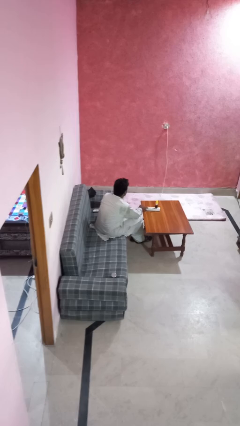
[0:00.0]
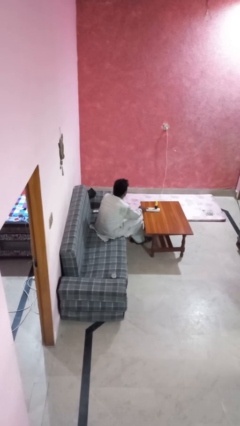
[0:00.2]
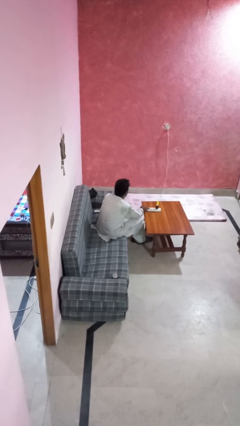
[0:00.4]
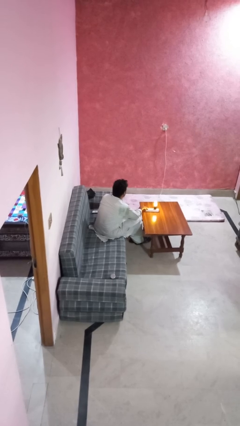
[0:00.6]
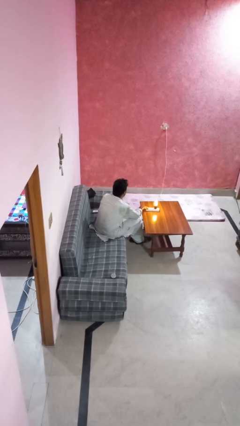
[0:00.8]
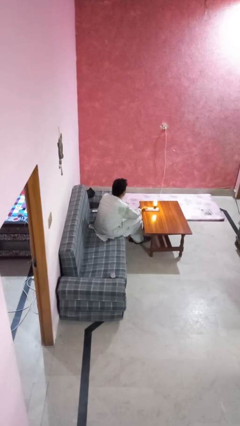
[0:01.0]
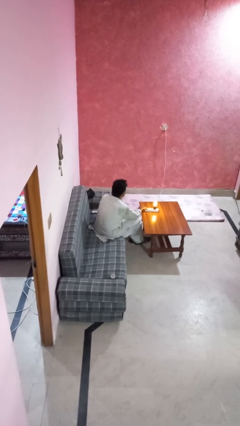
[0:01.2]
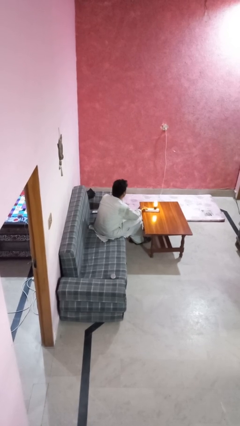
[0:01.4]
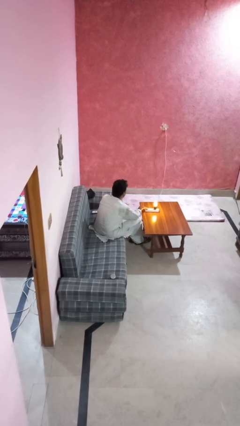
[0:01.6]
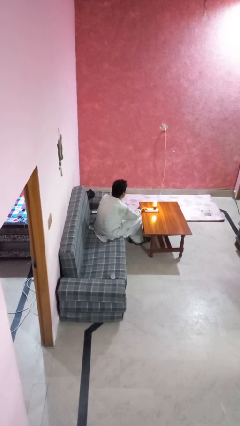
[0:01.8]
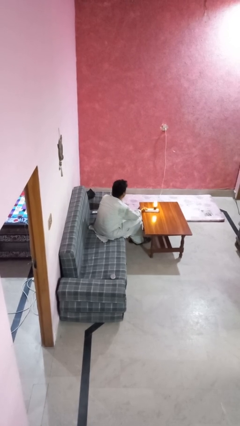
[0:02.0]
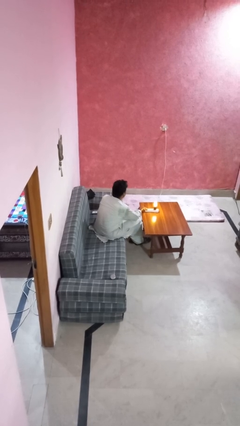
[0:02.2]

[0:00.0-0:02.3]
person turns on lamp

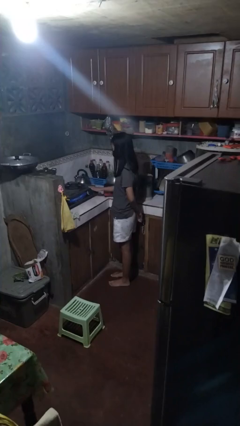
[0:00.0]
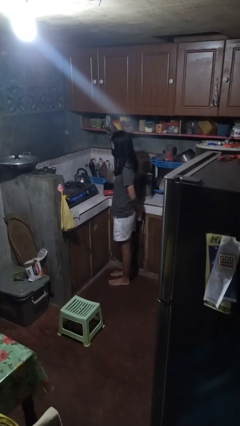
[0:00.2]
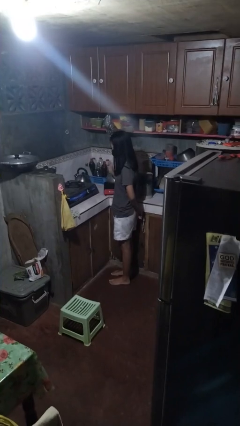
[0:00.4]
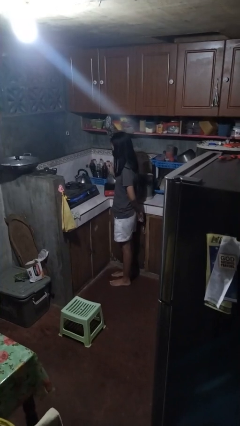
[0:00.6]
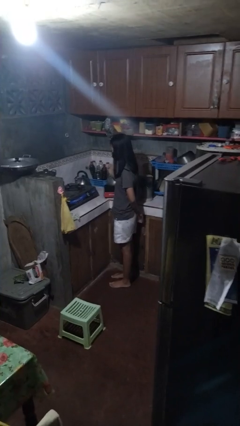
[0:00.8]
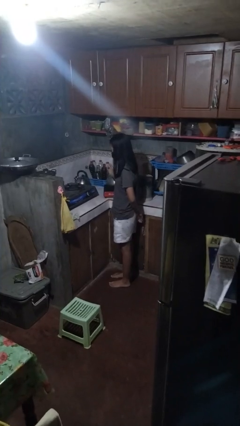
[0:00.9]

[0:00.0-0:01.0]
person burns hand

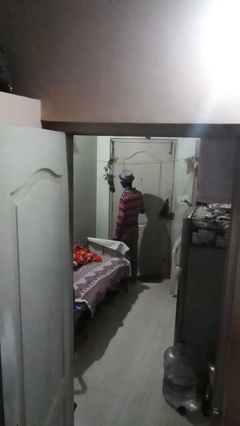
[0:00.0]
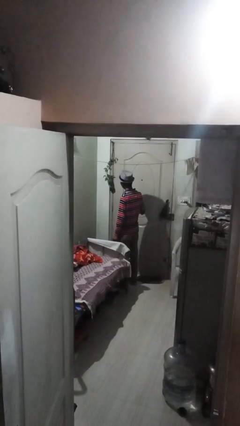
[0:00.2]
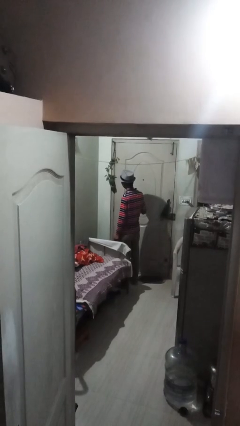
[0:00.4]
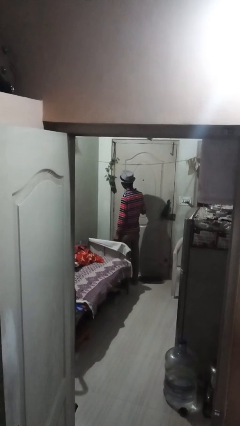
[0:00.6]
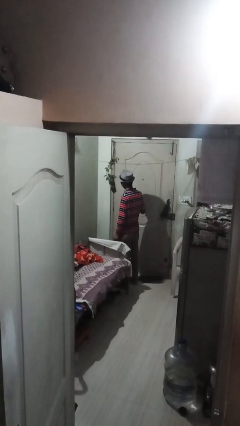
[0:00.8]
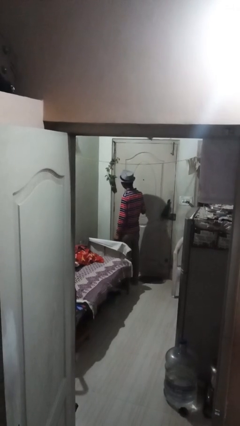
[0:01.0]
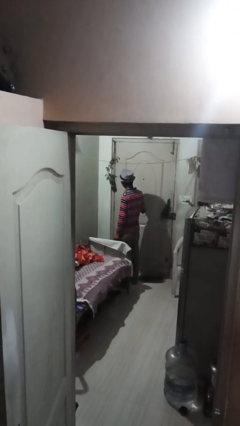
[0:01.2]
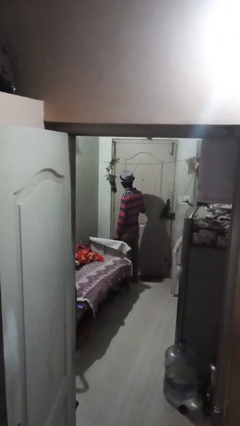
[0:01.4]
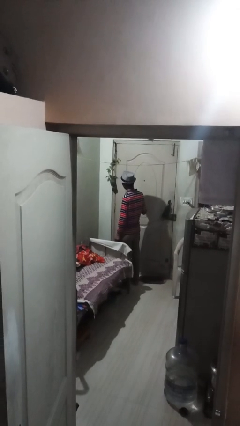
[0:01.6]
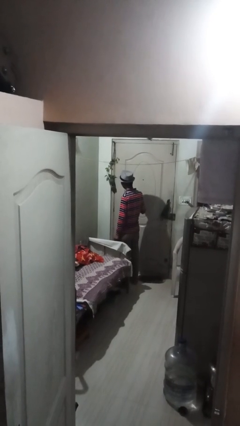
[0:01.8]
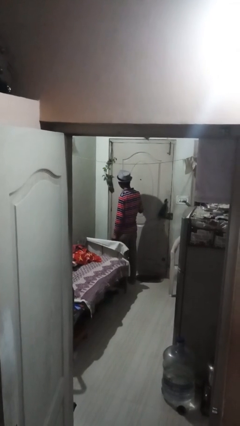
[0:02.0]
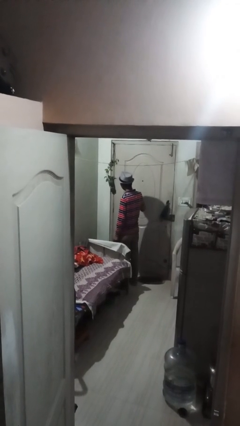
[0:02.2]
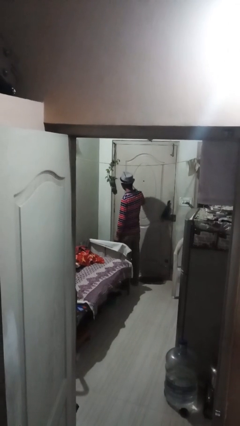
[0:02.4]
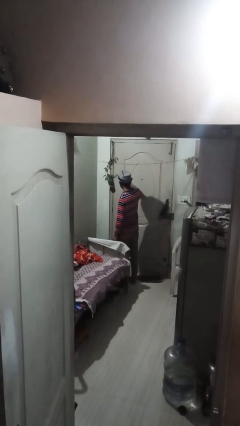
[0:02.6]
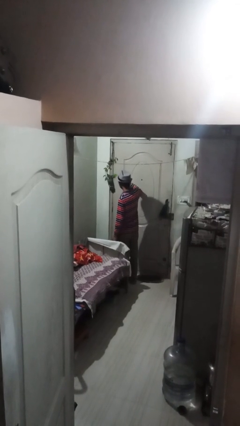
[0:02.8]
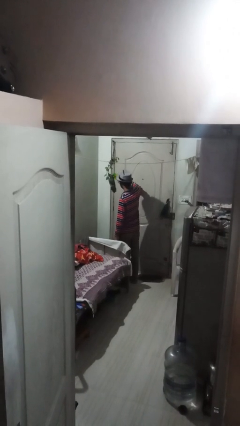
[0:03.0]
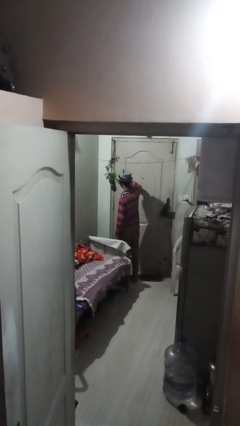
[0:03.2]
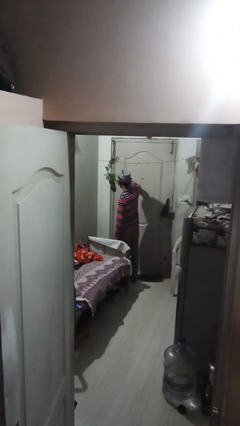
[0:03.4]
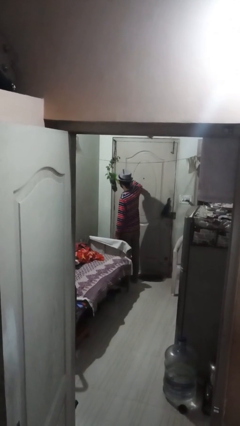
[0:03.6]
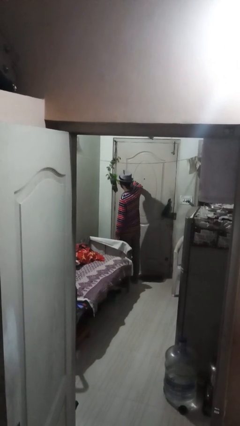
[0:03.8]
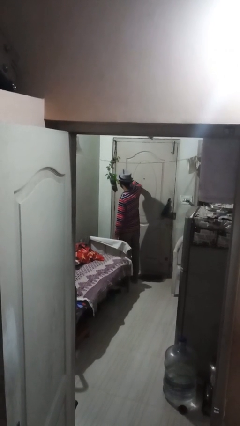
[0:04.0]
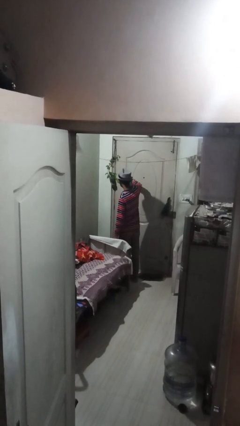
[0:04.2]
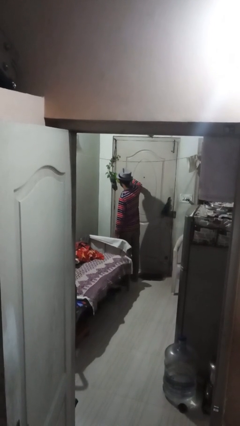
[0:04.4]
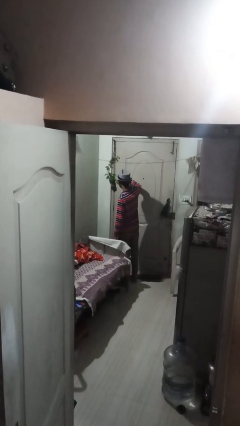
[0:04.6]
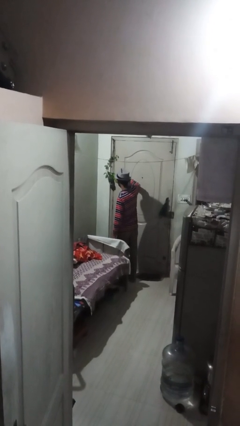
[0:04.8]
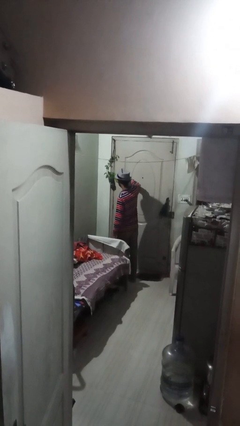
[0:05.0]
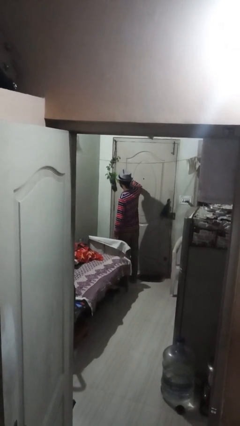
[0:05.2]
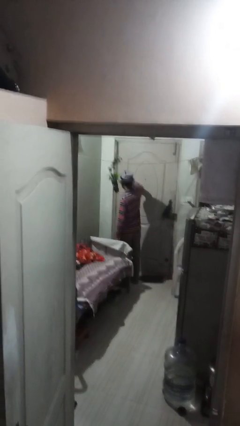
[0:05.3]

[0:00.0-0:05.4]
person waters houseplant

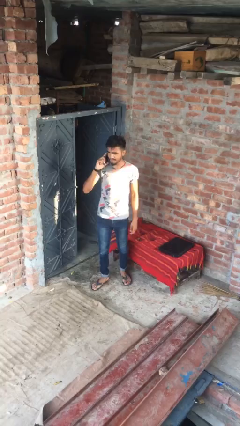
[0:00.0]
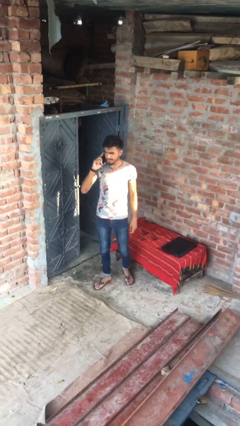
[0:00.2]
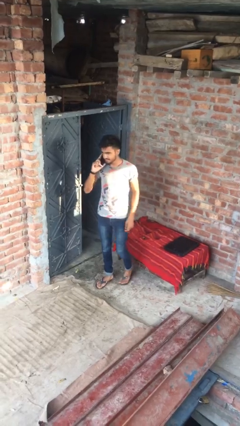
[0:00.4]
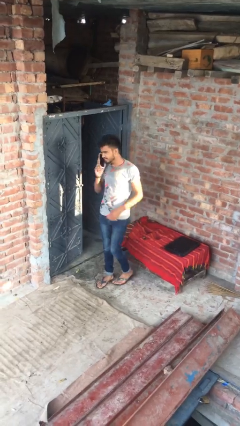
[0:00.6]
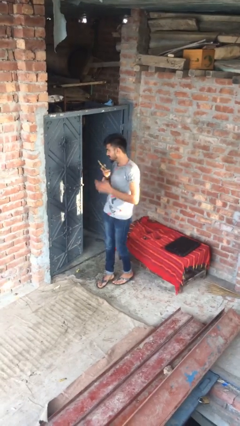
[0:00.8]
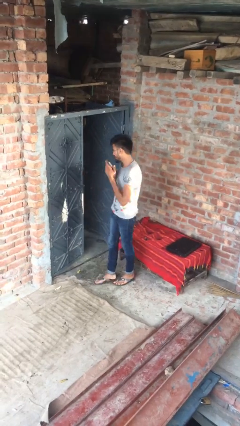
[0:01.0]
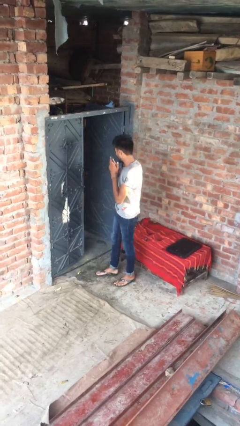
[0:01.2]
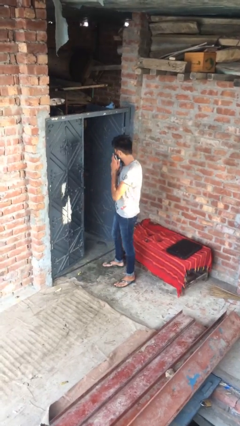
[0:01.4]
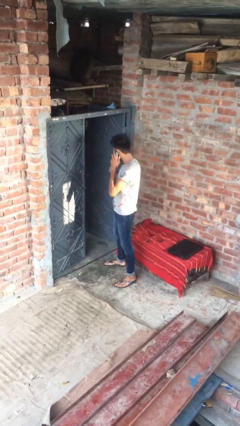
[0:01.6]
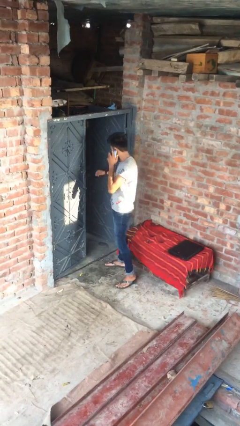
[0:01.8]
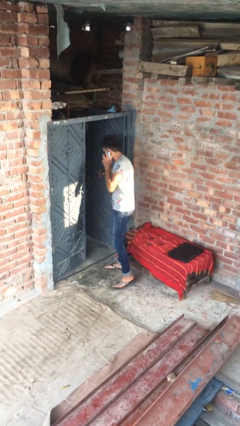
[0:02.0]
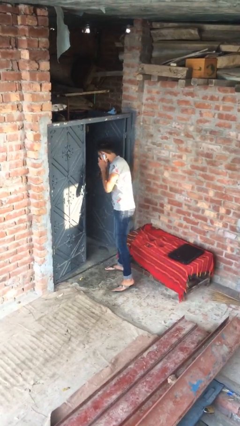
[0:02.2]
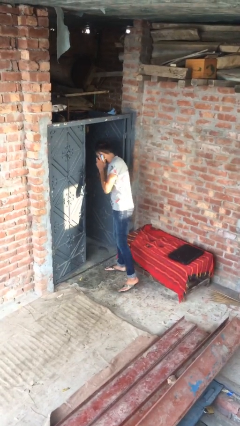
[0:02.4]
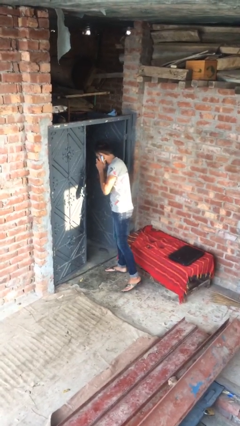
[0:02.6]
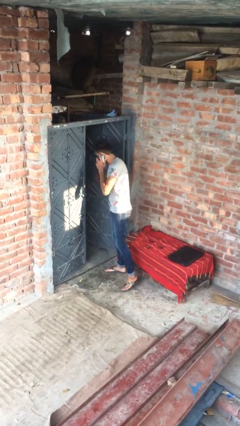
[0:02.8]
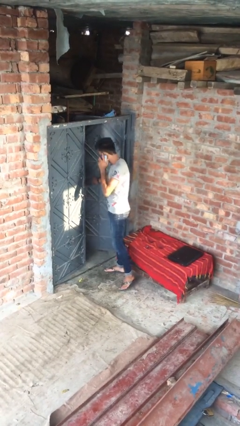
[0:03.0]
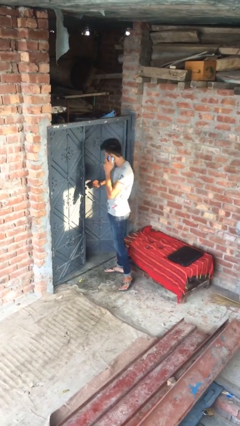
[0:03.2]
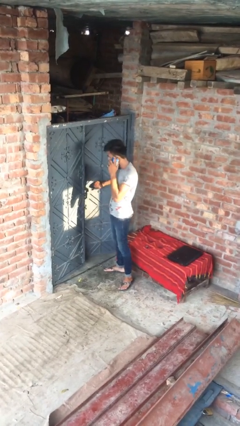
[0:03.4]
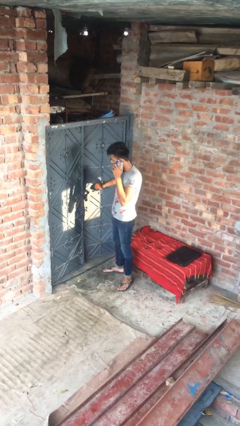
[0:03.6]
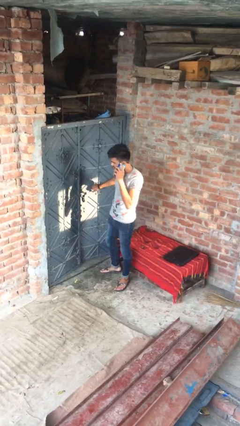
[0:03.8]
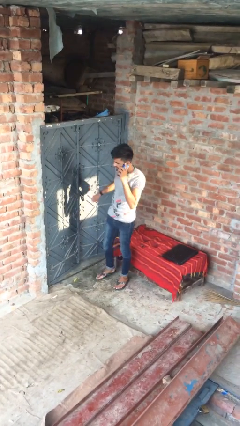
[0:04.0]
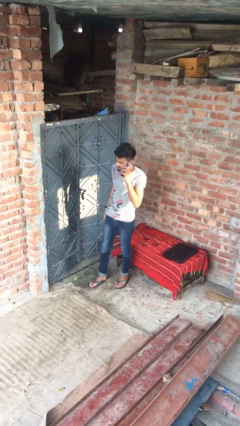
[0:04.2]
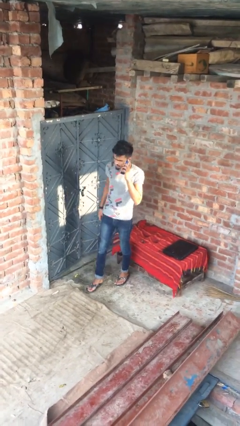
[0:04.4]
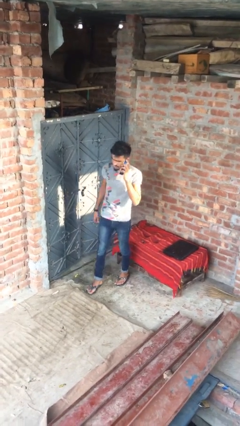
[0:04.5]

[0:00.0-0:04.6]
person closes facility door

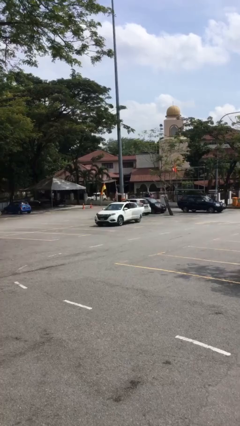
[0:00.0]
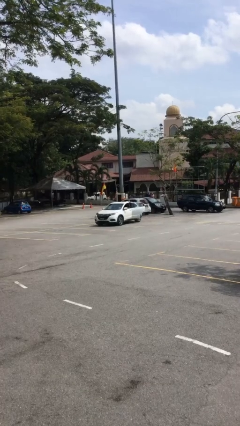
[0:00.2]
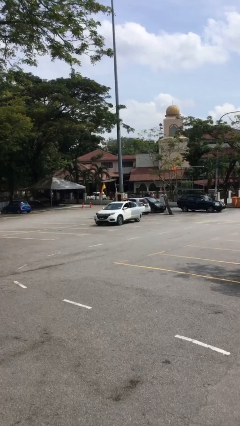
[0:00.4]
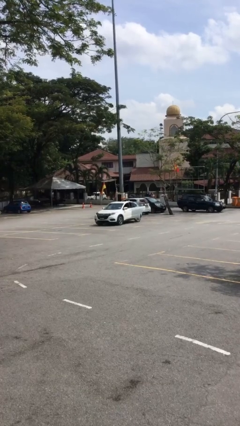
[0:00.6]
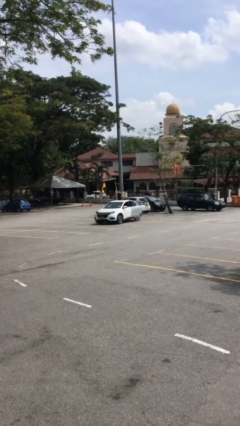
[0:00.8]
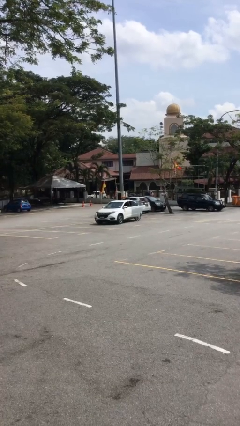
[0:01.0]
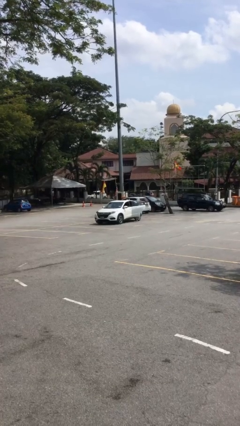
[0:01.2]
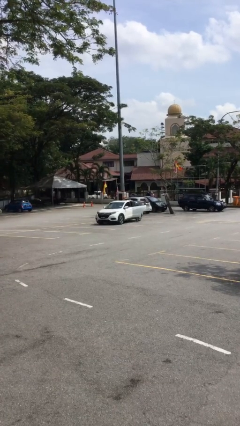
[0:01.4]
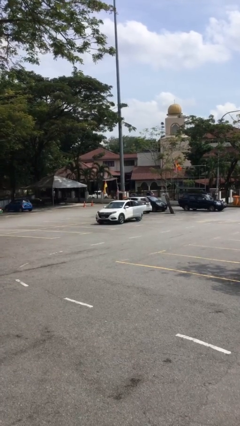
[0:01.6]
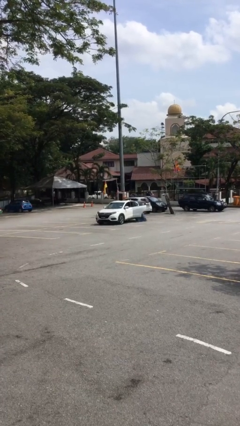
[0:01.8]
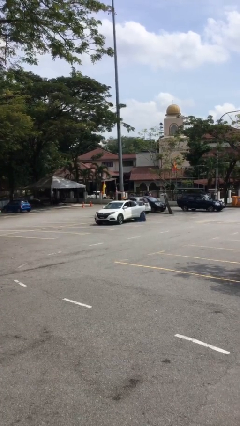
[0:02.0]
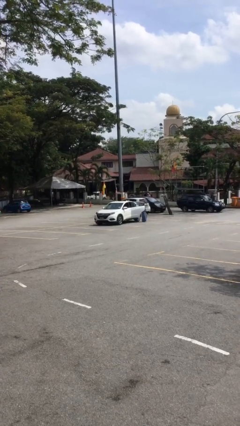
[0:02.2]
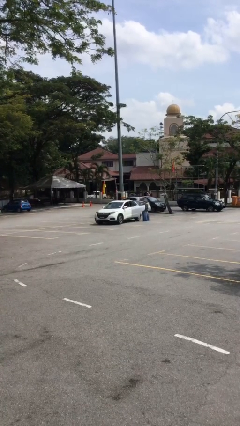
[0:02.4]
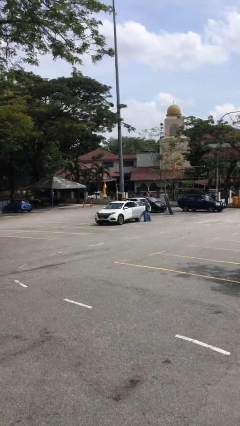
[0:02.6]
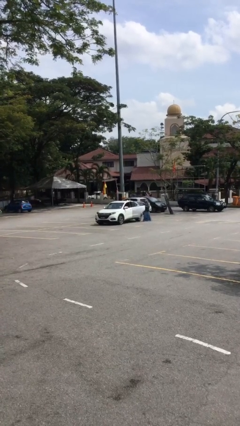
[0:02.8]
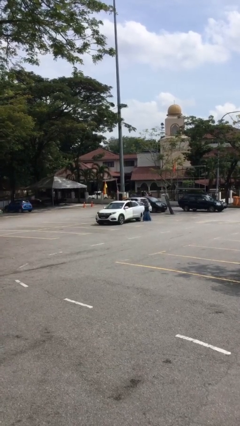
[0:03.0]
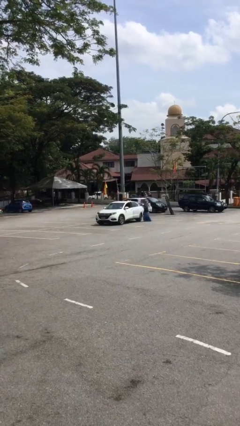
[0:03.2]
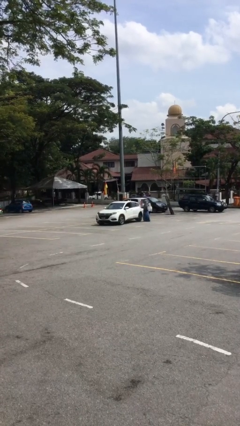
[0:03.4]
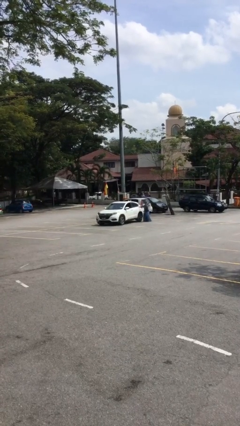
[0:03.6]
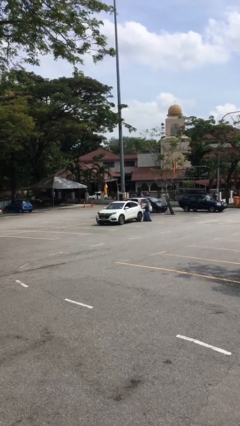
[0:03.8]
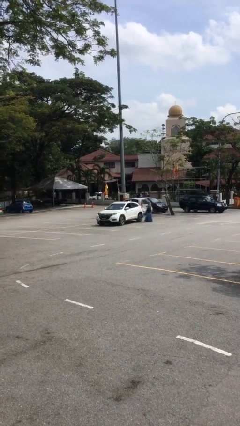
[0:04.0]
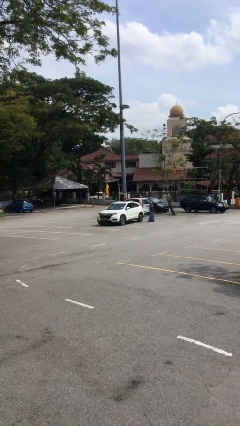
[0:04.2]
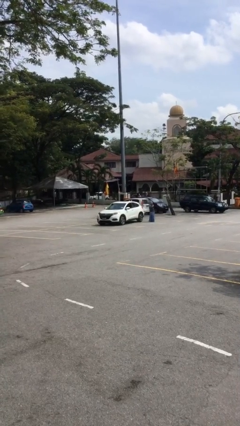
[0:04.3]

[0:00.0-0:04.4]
car drops off person

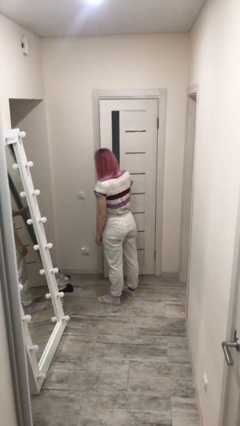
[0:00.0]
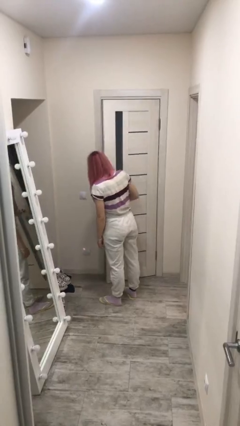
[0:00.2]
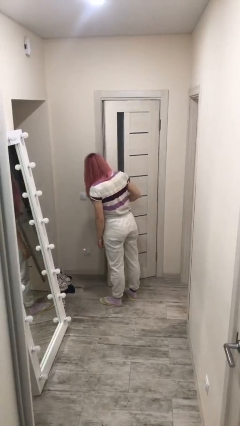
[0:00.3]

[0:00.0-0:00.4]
person opens facility door
